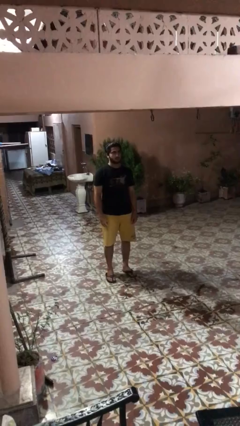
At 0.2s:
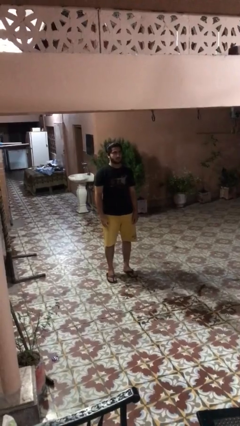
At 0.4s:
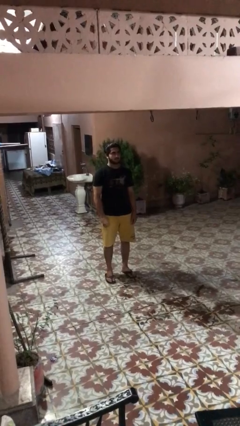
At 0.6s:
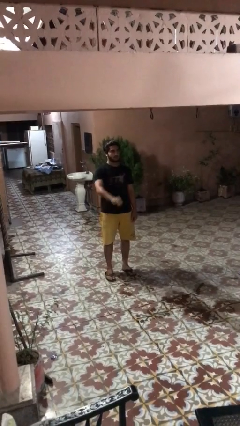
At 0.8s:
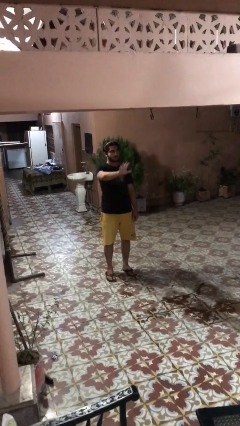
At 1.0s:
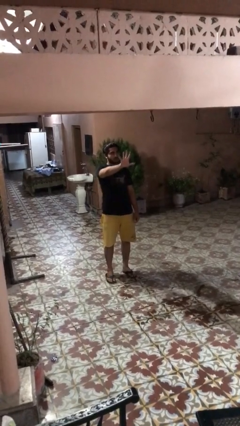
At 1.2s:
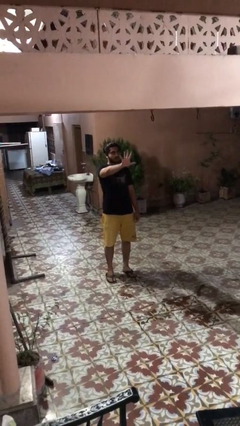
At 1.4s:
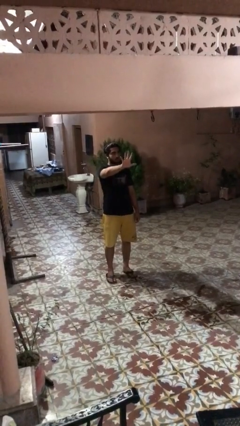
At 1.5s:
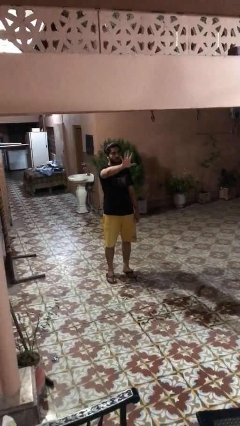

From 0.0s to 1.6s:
person gestures number five

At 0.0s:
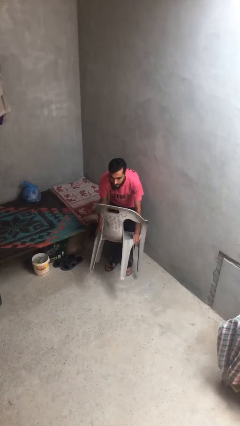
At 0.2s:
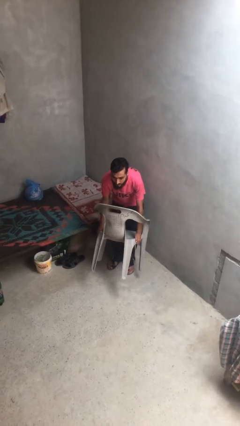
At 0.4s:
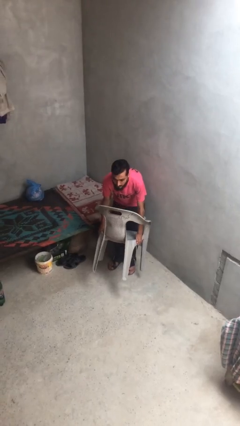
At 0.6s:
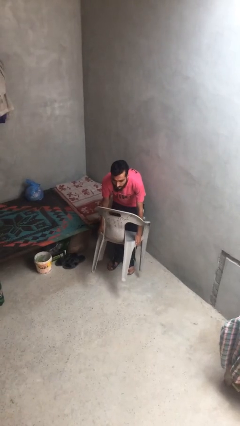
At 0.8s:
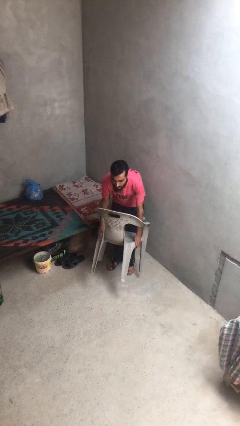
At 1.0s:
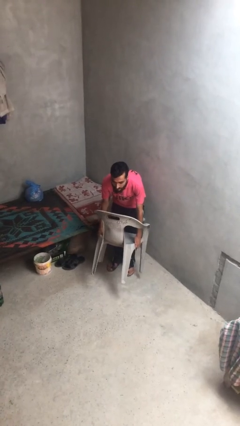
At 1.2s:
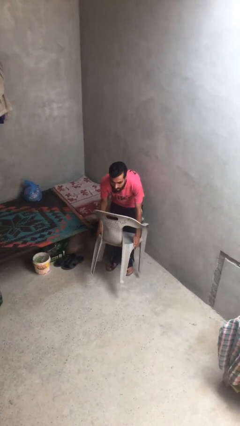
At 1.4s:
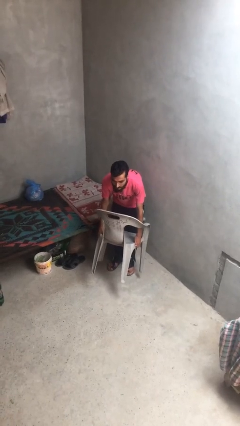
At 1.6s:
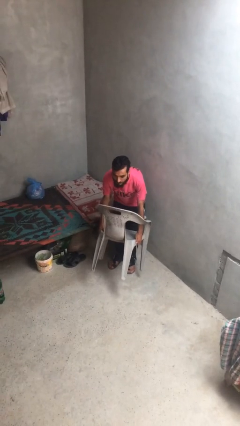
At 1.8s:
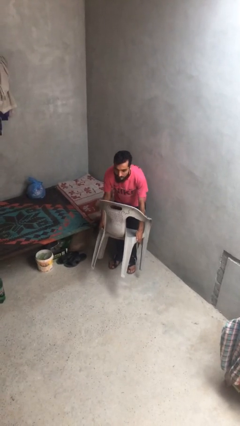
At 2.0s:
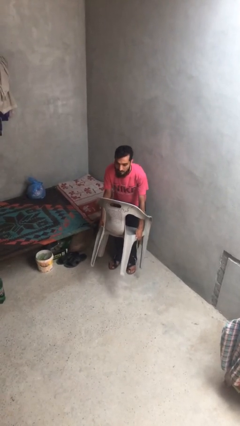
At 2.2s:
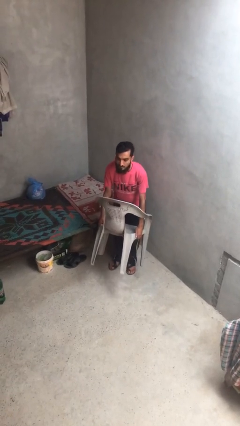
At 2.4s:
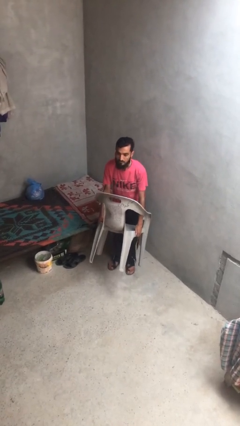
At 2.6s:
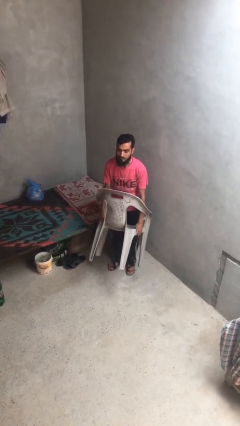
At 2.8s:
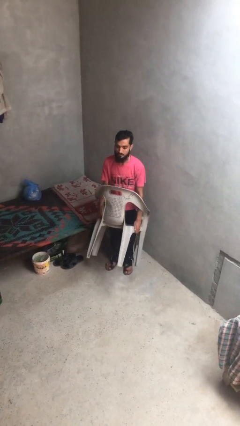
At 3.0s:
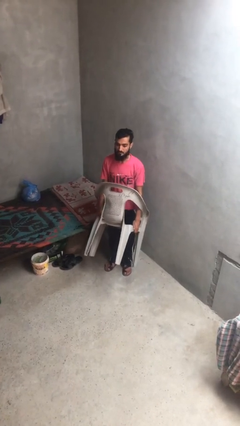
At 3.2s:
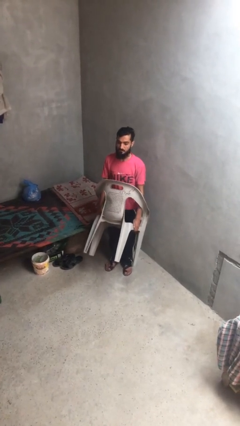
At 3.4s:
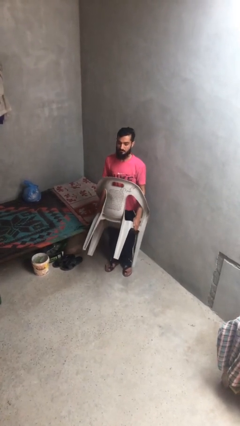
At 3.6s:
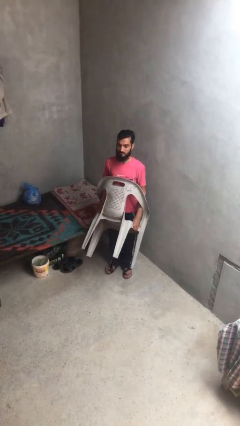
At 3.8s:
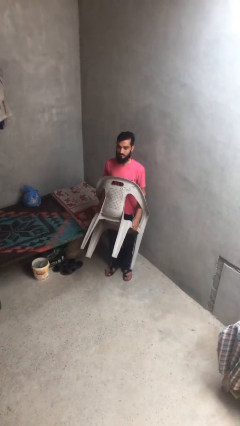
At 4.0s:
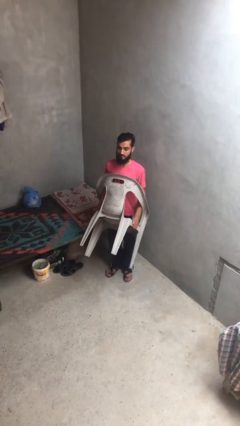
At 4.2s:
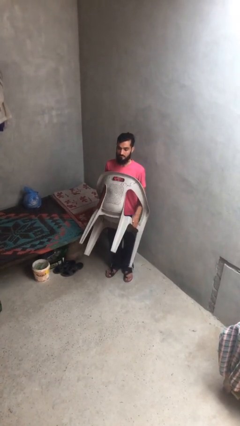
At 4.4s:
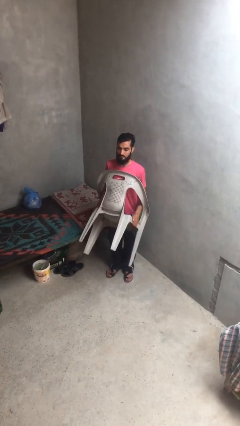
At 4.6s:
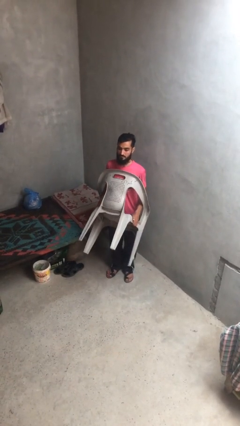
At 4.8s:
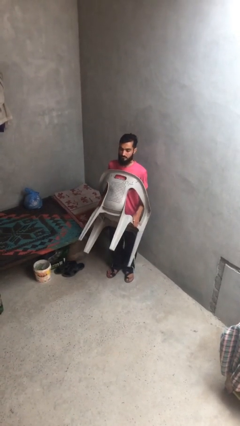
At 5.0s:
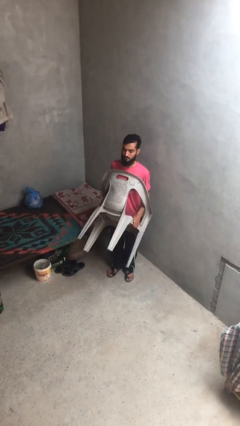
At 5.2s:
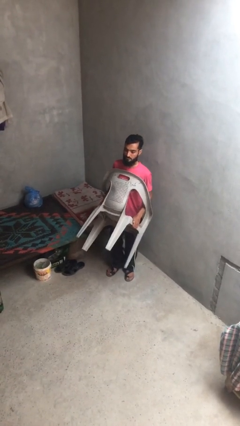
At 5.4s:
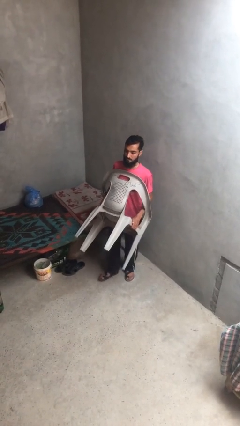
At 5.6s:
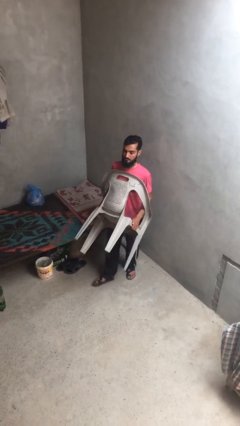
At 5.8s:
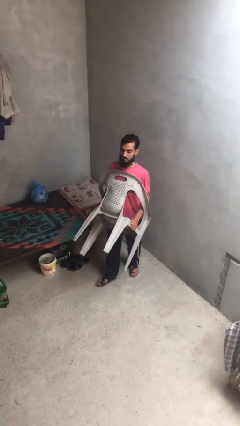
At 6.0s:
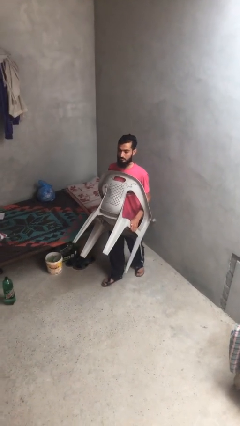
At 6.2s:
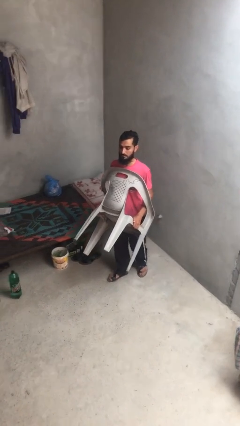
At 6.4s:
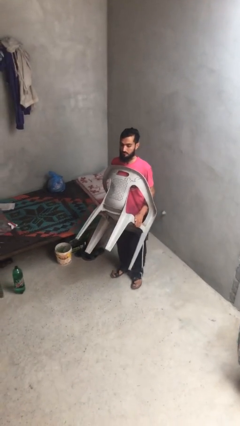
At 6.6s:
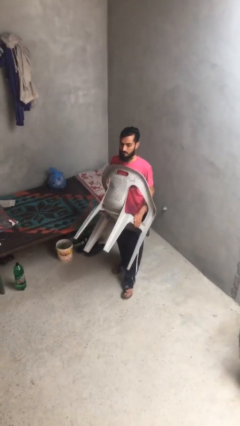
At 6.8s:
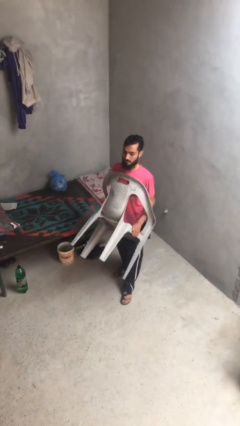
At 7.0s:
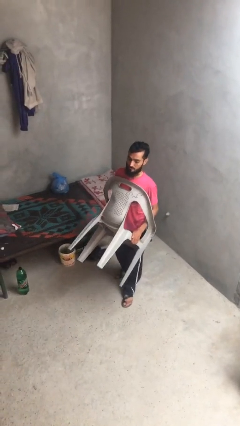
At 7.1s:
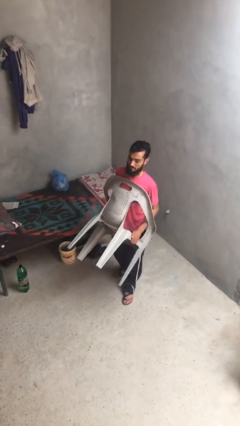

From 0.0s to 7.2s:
person carries heavy object

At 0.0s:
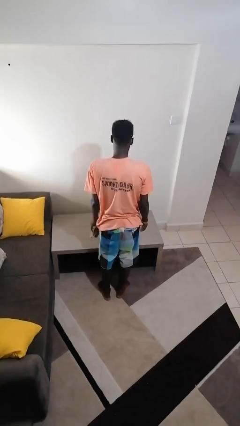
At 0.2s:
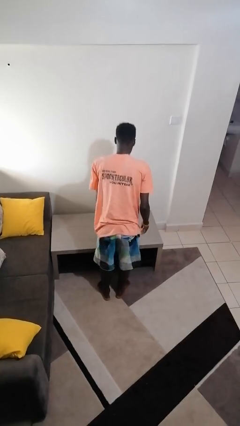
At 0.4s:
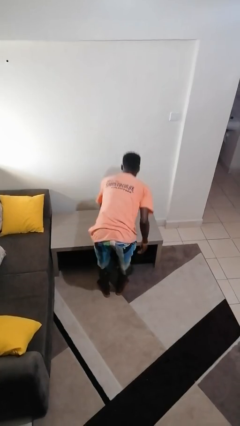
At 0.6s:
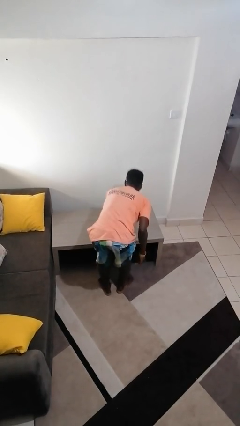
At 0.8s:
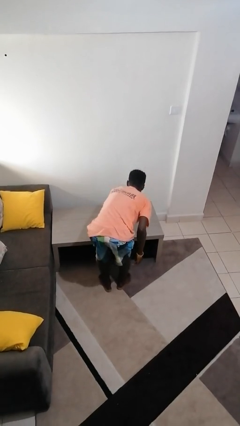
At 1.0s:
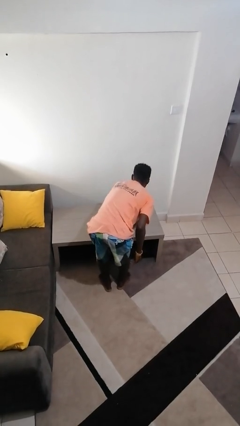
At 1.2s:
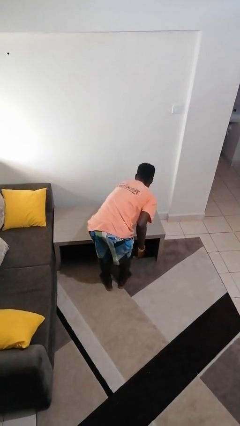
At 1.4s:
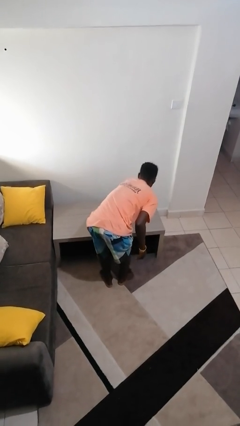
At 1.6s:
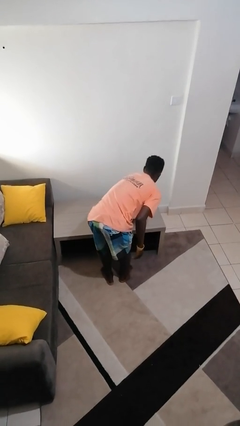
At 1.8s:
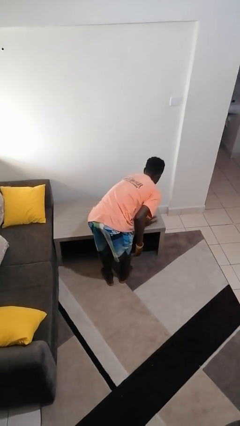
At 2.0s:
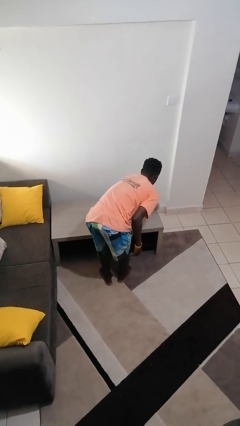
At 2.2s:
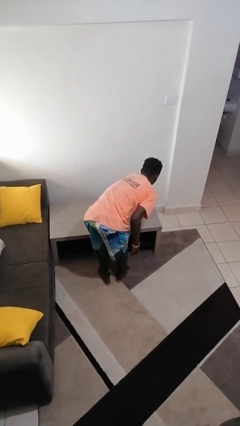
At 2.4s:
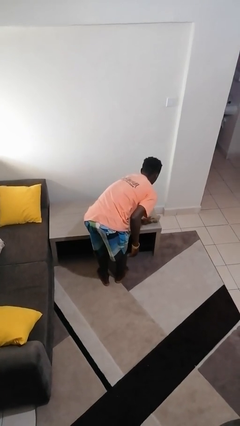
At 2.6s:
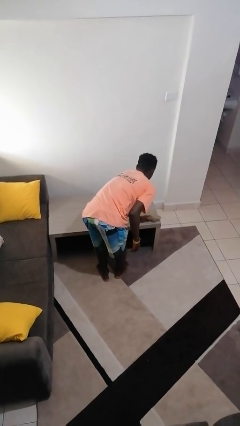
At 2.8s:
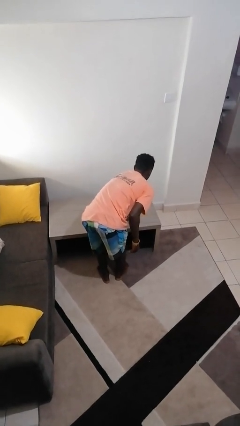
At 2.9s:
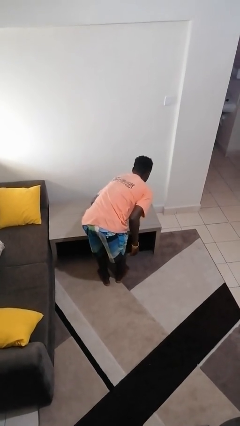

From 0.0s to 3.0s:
person cleans table with rag

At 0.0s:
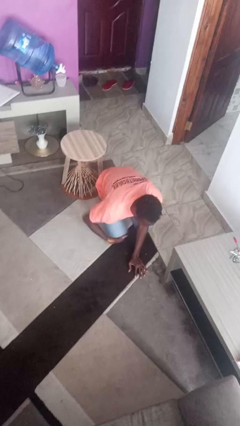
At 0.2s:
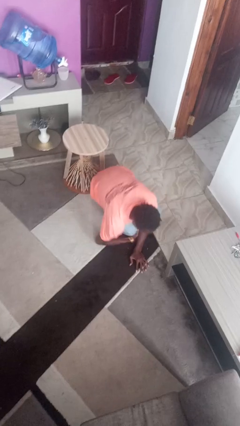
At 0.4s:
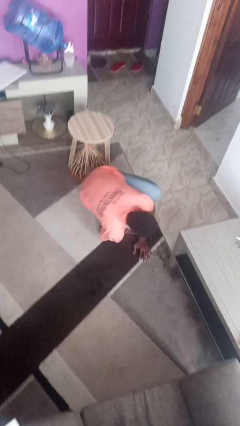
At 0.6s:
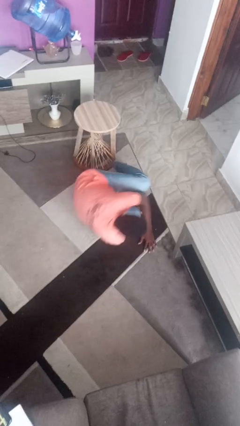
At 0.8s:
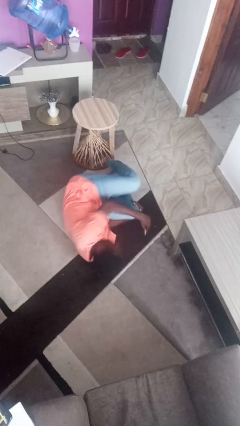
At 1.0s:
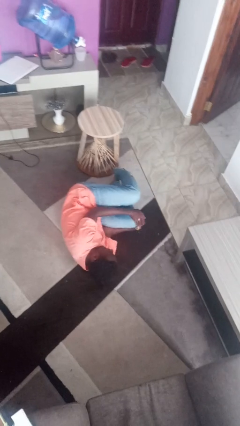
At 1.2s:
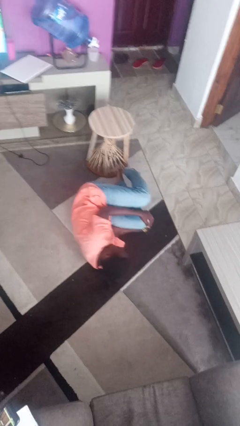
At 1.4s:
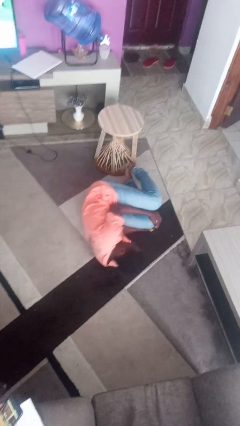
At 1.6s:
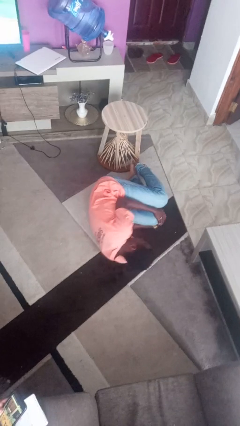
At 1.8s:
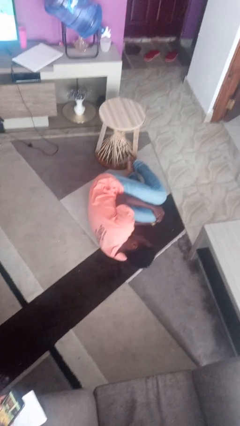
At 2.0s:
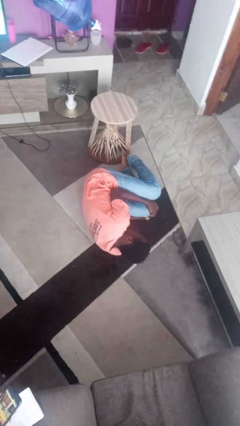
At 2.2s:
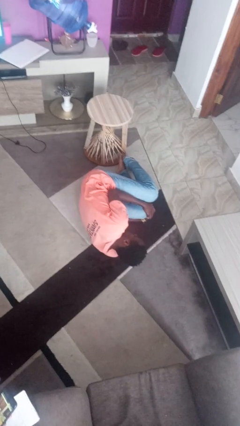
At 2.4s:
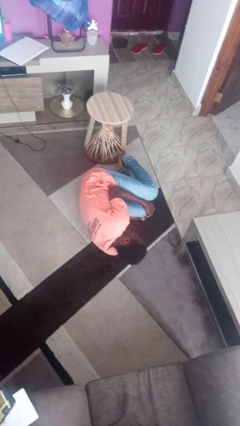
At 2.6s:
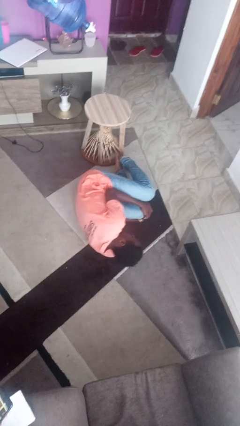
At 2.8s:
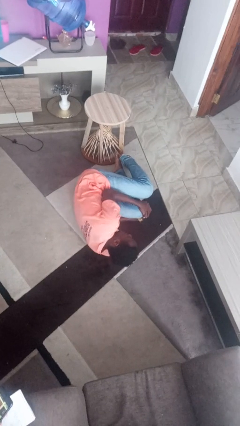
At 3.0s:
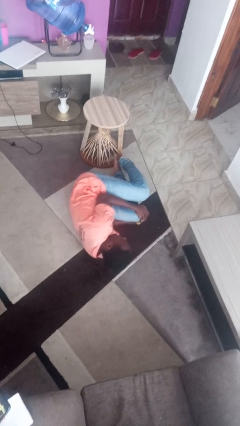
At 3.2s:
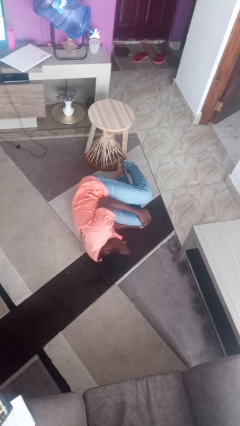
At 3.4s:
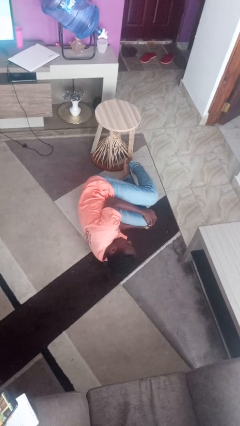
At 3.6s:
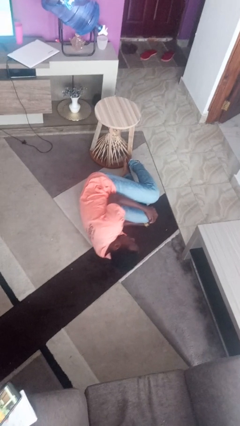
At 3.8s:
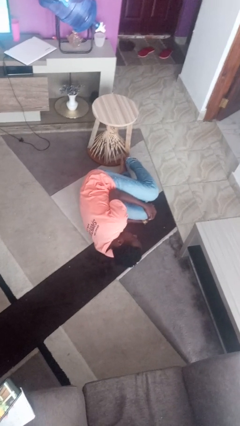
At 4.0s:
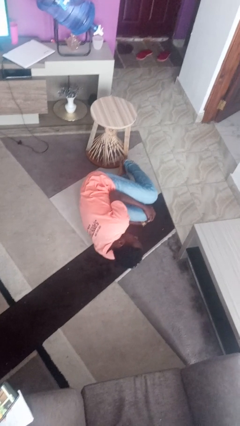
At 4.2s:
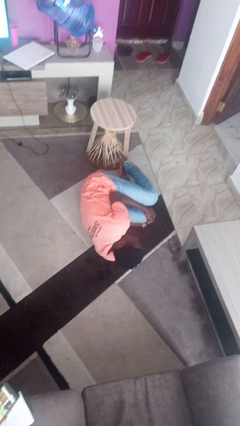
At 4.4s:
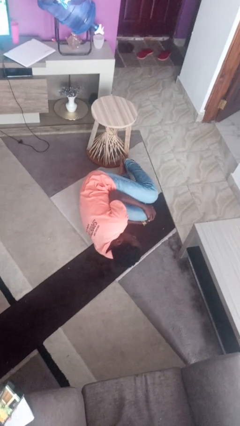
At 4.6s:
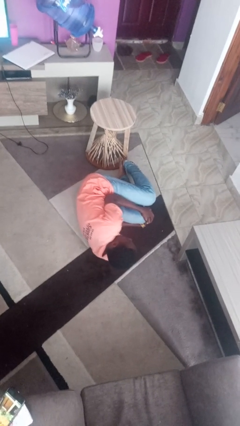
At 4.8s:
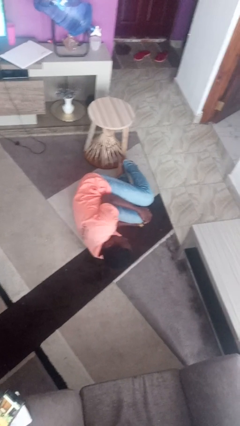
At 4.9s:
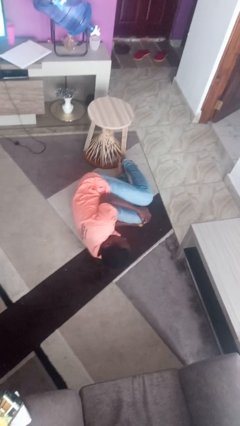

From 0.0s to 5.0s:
person lies down on floor

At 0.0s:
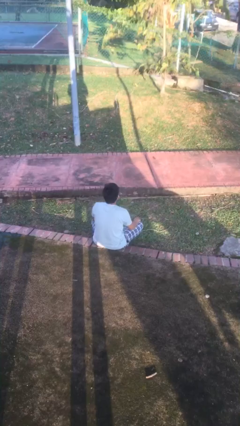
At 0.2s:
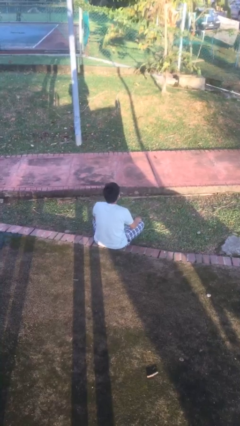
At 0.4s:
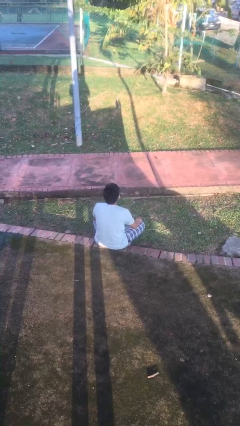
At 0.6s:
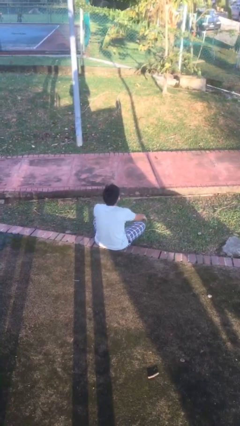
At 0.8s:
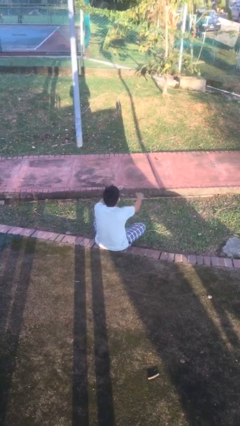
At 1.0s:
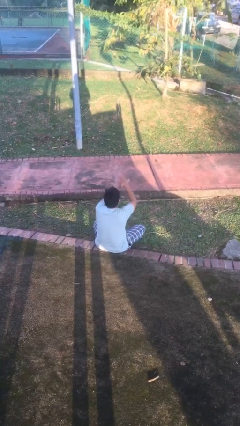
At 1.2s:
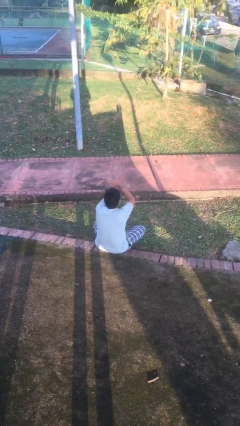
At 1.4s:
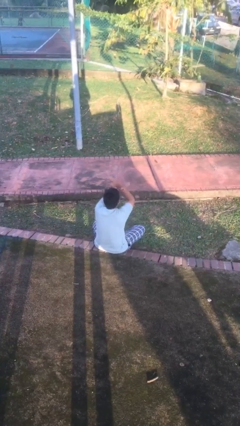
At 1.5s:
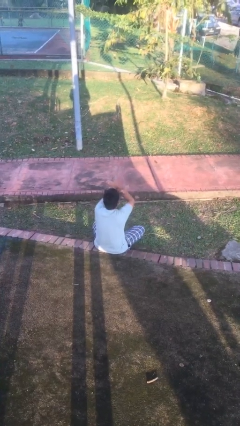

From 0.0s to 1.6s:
person gestures arms x
